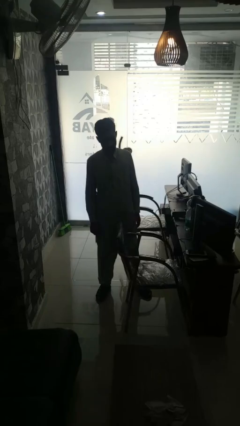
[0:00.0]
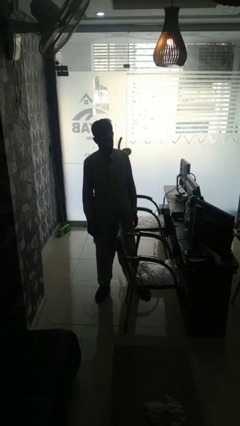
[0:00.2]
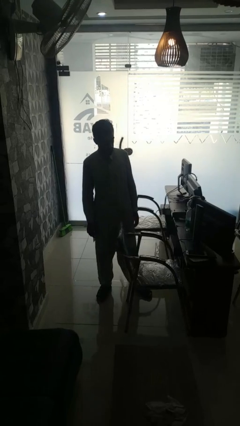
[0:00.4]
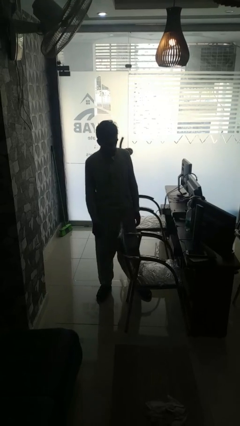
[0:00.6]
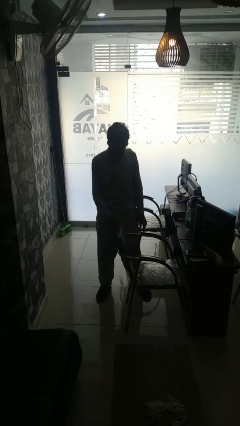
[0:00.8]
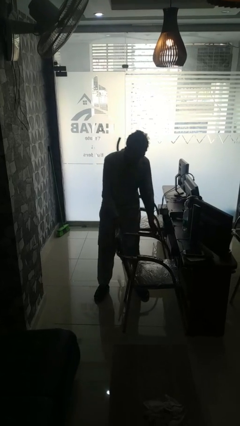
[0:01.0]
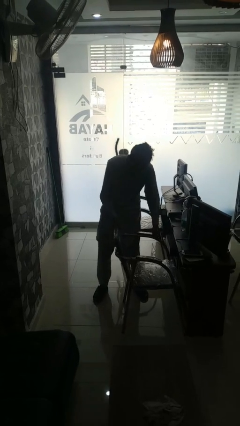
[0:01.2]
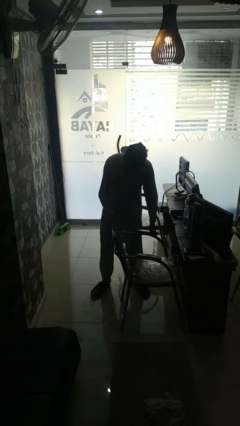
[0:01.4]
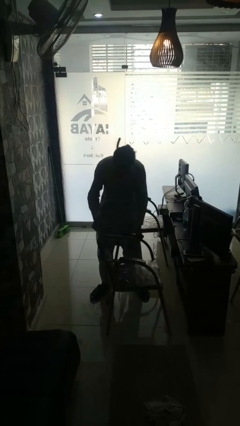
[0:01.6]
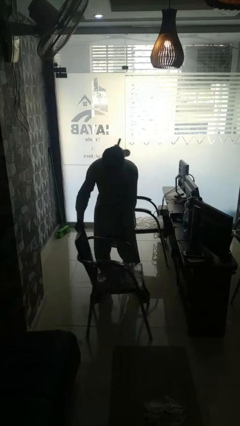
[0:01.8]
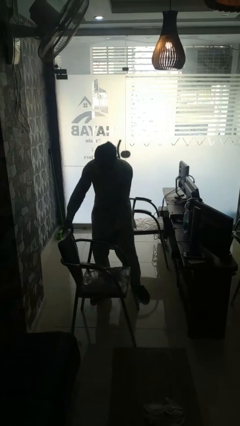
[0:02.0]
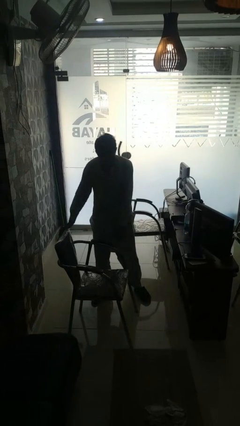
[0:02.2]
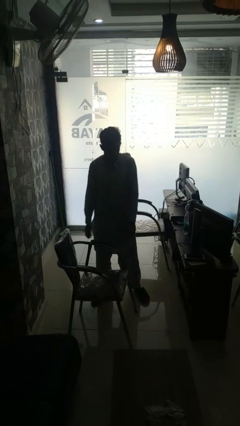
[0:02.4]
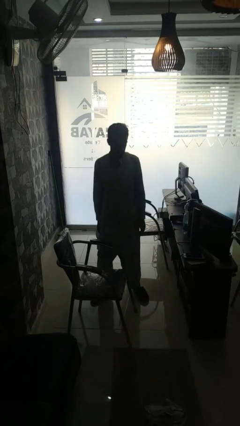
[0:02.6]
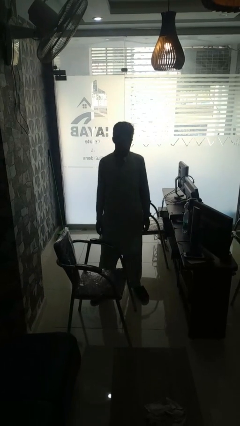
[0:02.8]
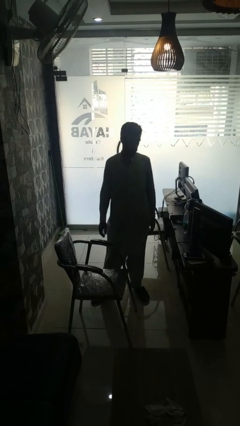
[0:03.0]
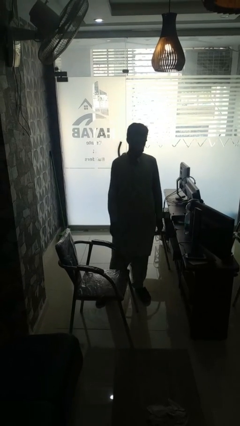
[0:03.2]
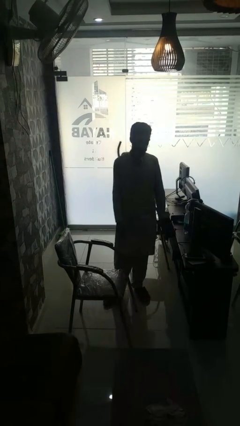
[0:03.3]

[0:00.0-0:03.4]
person pulls out chair

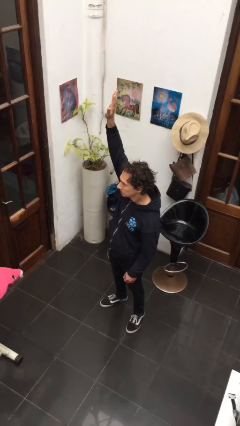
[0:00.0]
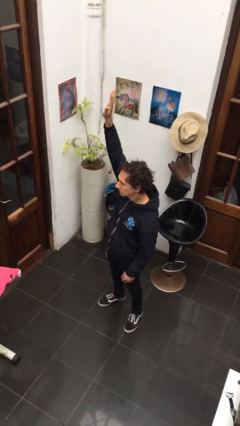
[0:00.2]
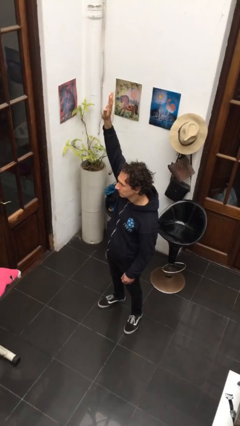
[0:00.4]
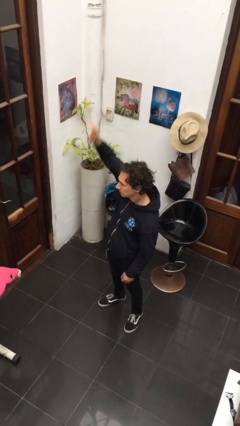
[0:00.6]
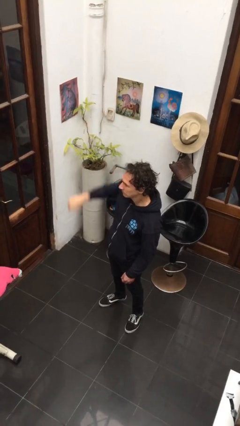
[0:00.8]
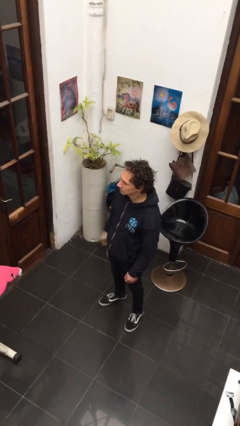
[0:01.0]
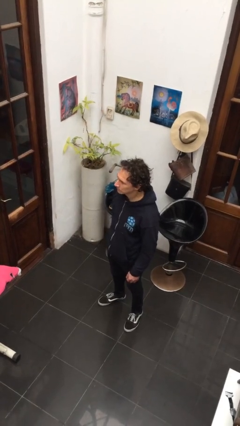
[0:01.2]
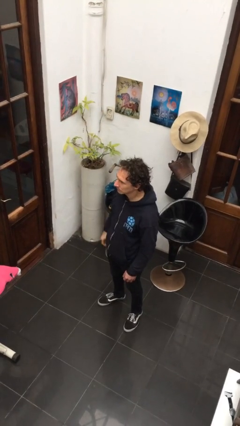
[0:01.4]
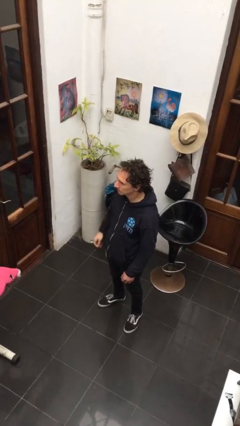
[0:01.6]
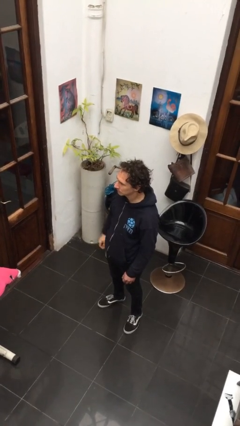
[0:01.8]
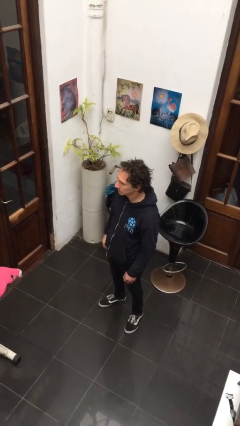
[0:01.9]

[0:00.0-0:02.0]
person gestures lower hand

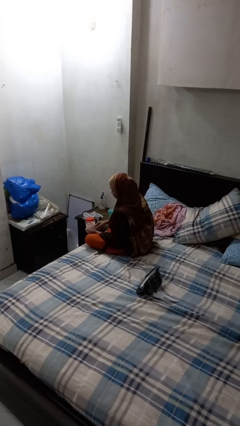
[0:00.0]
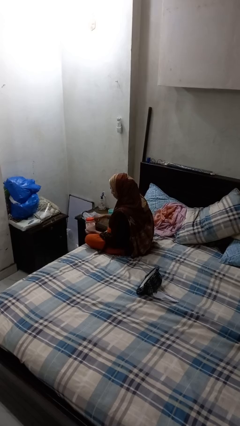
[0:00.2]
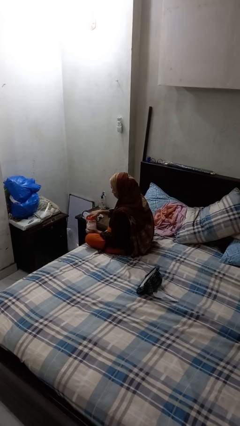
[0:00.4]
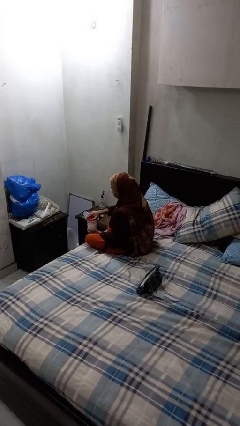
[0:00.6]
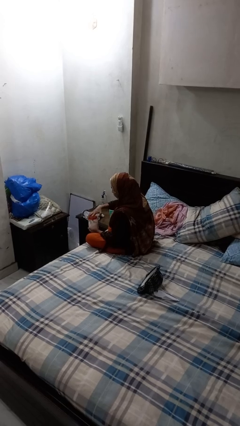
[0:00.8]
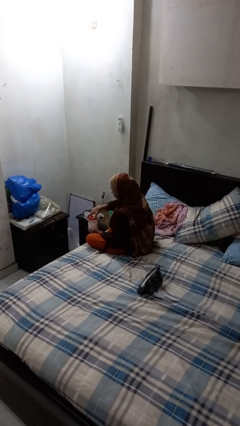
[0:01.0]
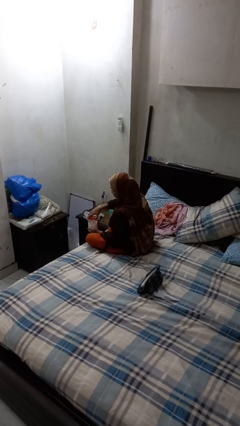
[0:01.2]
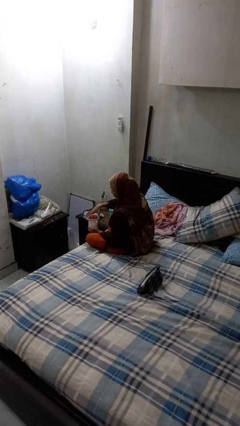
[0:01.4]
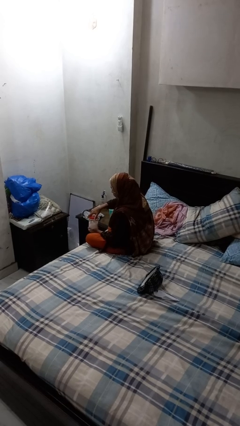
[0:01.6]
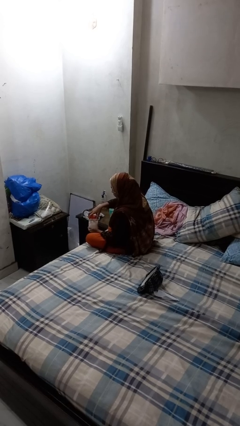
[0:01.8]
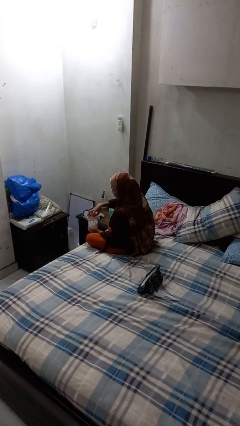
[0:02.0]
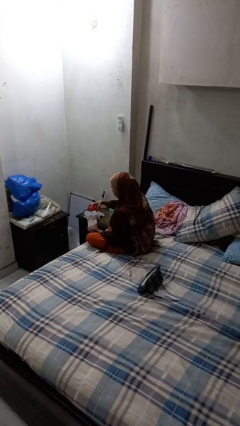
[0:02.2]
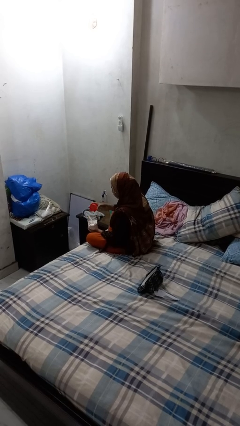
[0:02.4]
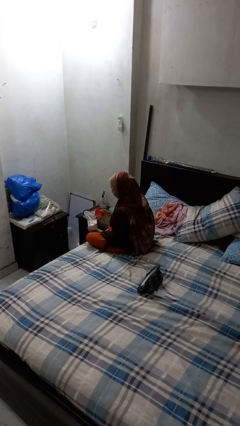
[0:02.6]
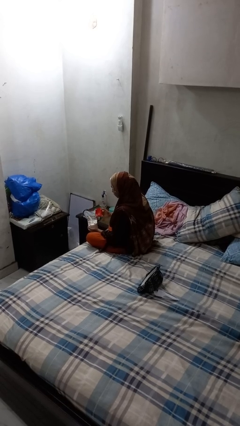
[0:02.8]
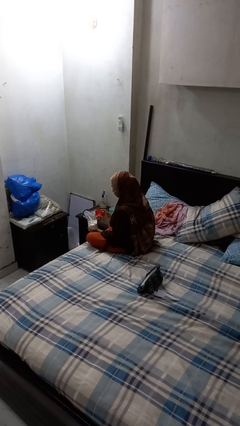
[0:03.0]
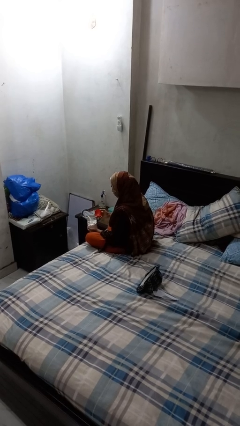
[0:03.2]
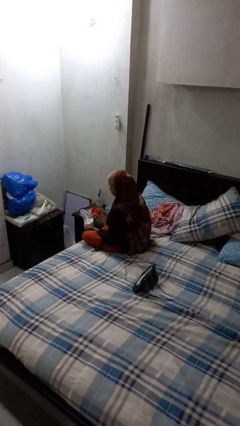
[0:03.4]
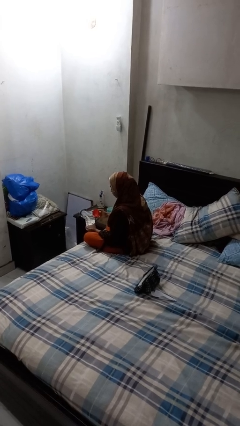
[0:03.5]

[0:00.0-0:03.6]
person opens jar

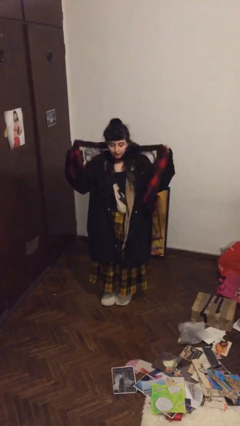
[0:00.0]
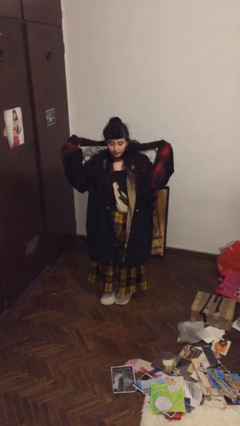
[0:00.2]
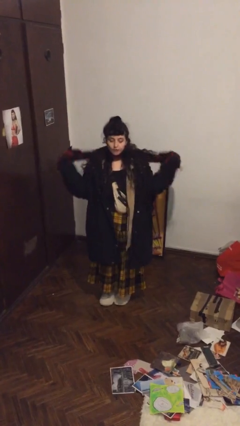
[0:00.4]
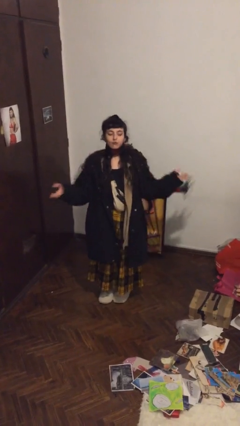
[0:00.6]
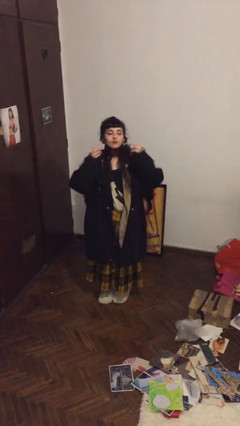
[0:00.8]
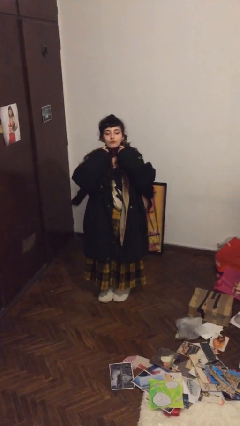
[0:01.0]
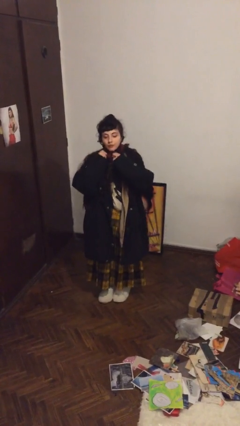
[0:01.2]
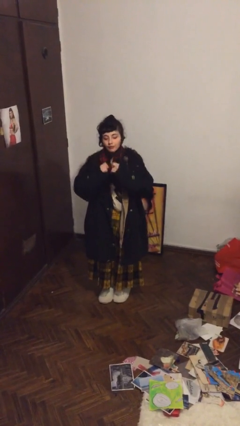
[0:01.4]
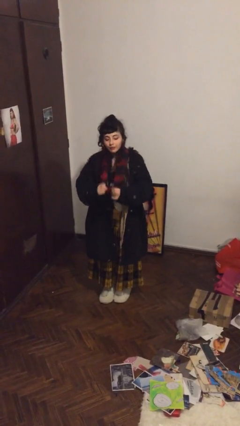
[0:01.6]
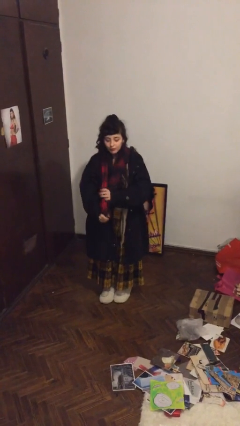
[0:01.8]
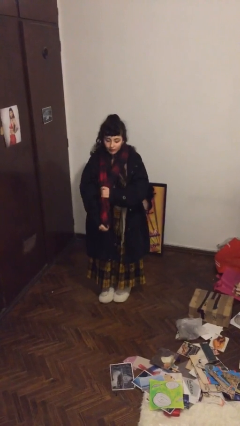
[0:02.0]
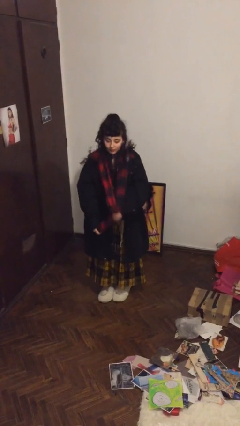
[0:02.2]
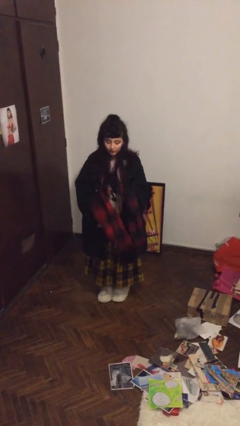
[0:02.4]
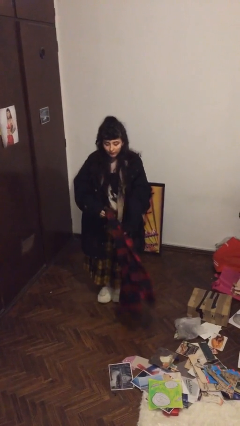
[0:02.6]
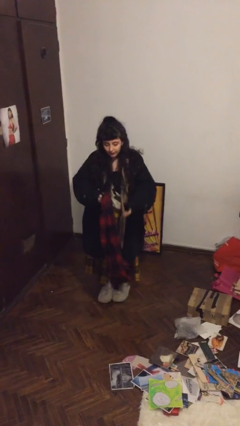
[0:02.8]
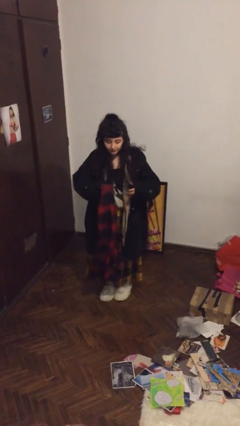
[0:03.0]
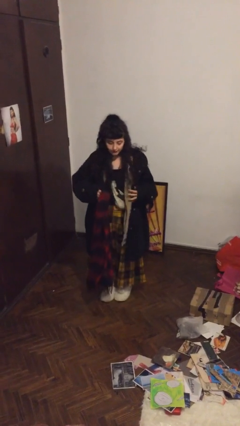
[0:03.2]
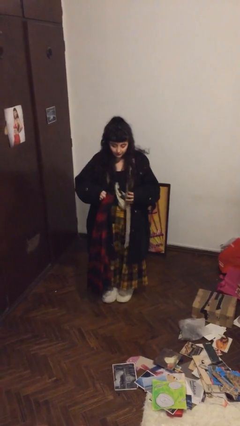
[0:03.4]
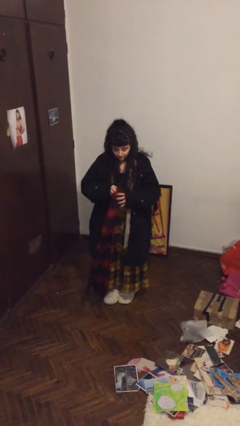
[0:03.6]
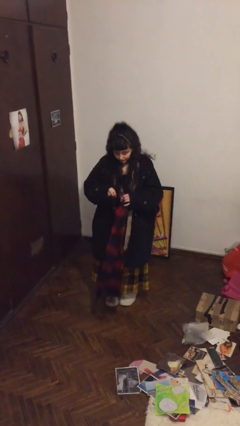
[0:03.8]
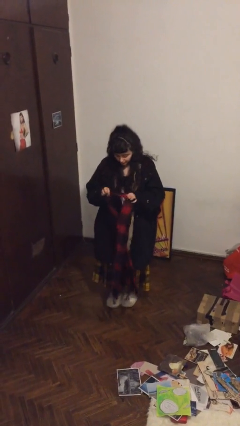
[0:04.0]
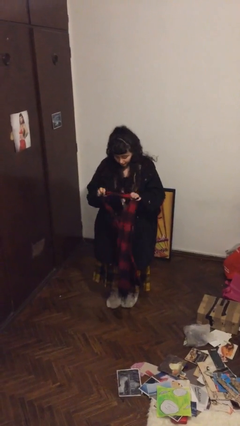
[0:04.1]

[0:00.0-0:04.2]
person takes off scarf

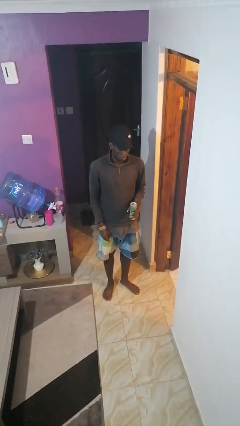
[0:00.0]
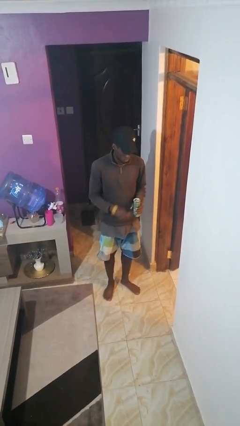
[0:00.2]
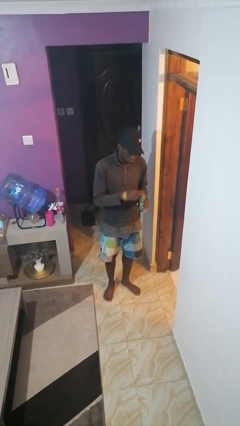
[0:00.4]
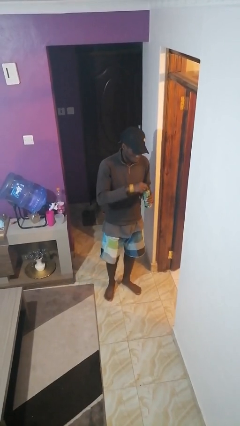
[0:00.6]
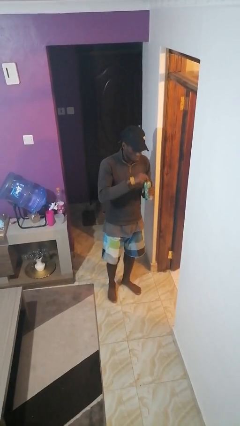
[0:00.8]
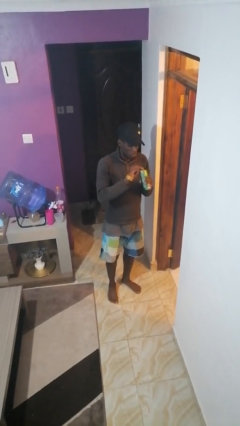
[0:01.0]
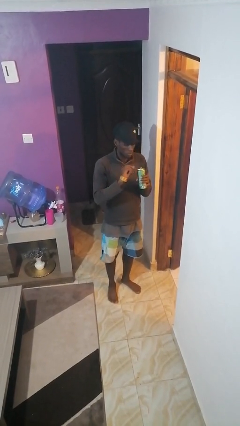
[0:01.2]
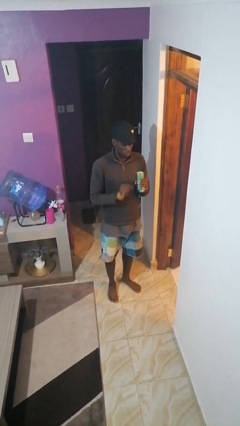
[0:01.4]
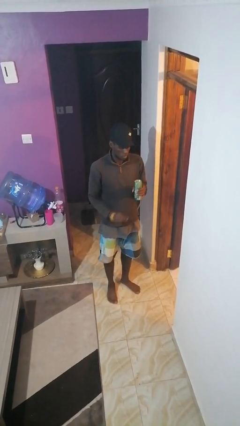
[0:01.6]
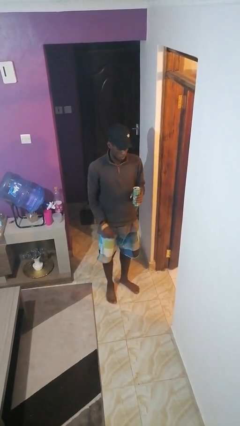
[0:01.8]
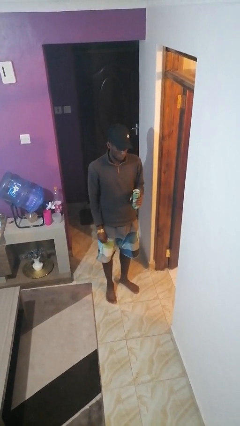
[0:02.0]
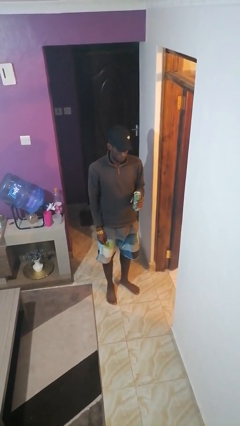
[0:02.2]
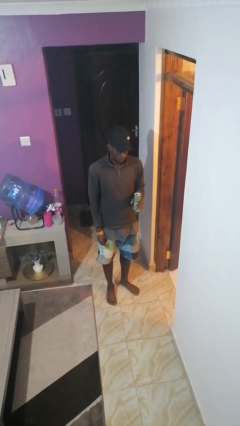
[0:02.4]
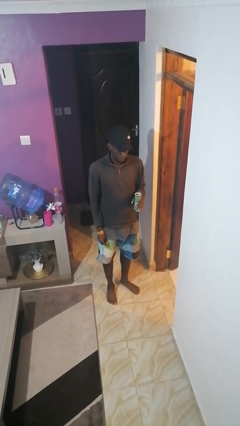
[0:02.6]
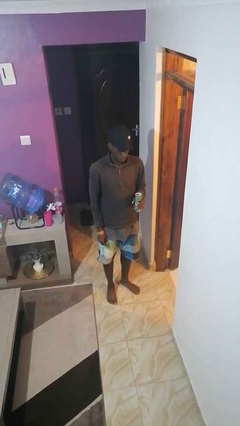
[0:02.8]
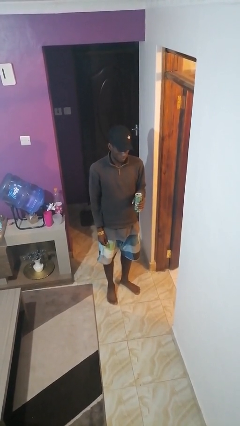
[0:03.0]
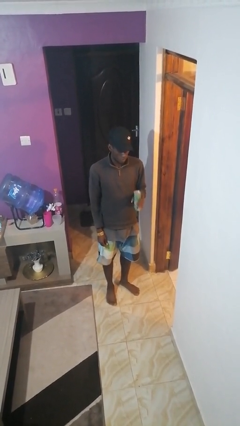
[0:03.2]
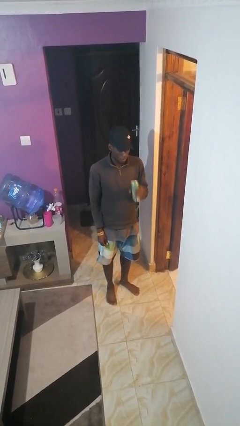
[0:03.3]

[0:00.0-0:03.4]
person opens beverage can

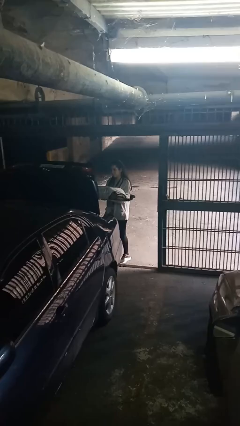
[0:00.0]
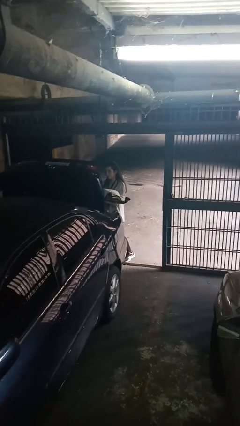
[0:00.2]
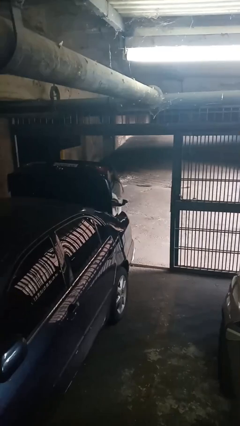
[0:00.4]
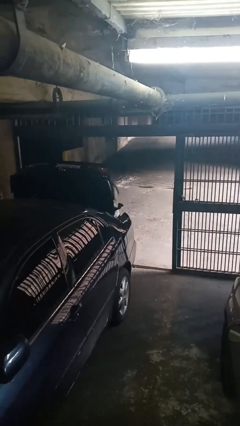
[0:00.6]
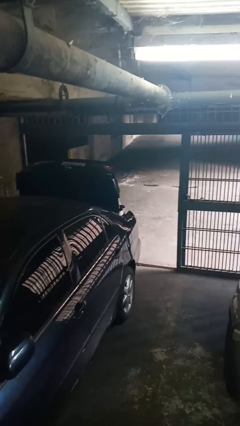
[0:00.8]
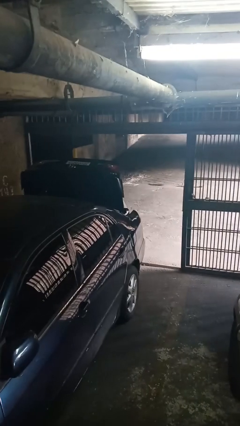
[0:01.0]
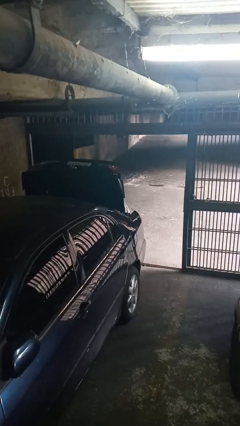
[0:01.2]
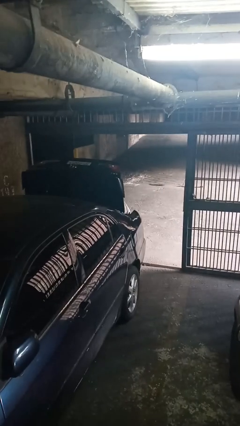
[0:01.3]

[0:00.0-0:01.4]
person loads car
